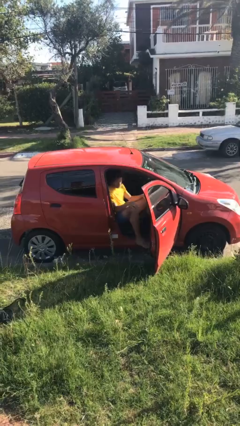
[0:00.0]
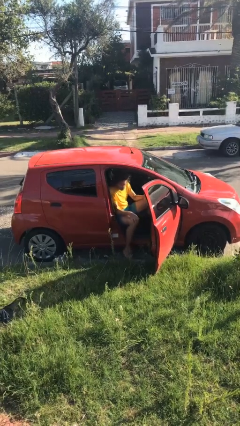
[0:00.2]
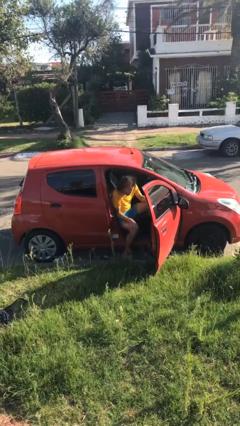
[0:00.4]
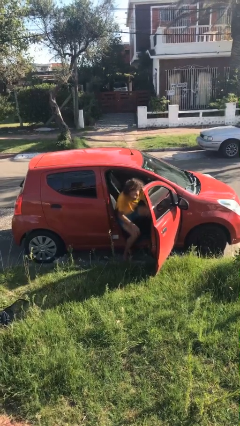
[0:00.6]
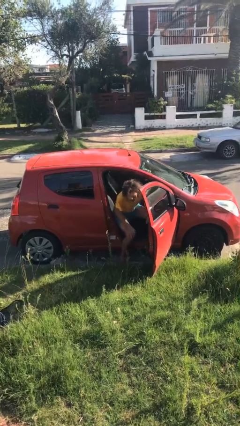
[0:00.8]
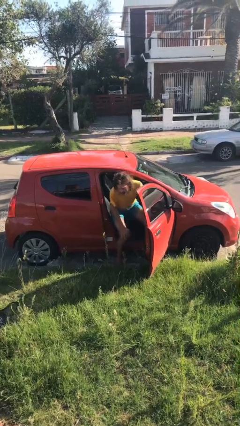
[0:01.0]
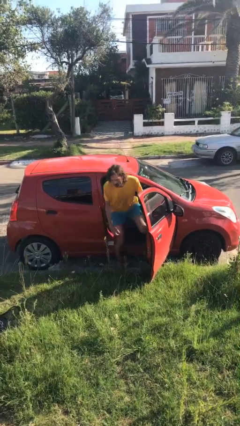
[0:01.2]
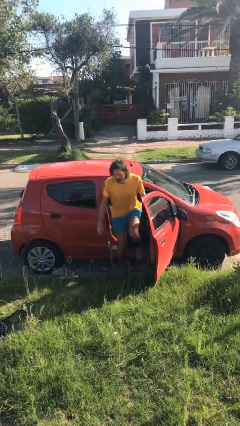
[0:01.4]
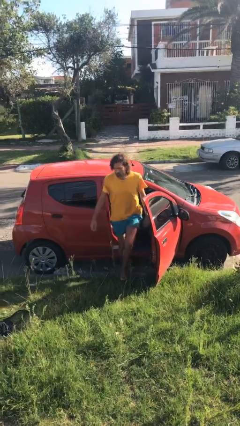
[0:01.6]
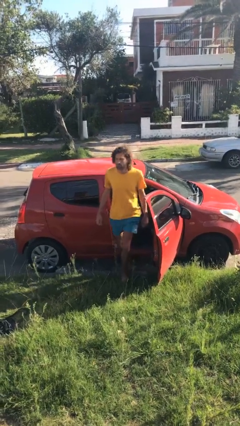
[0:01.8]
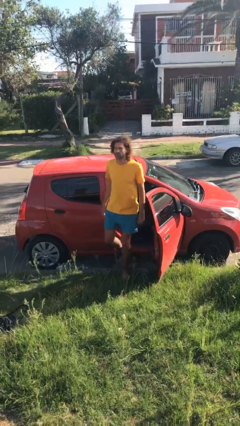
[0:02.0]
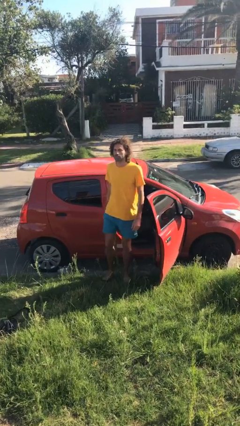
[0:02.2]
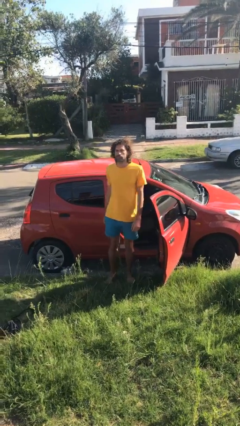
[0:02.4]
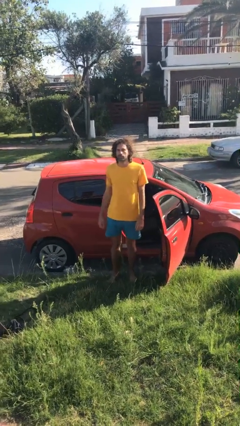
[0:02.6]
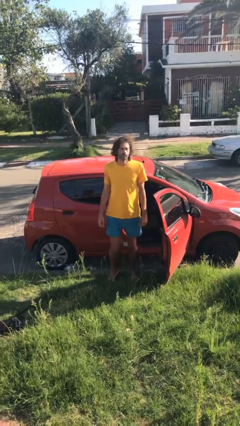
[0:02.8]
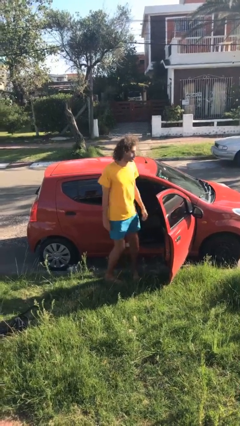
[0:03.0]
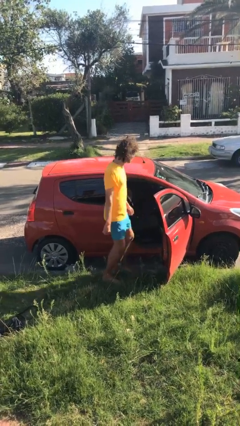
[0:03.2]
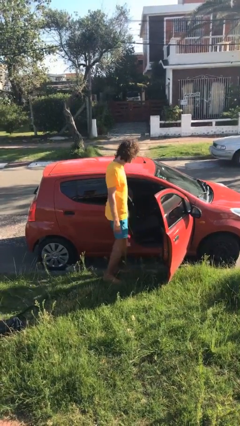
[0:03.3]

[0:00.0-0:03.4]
person exits car

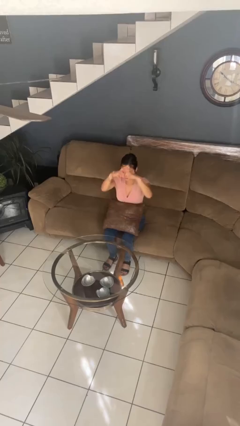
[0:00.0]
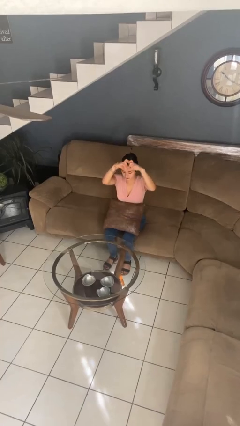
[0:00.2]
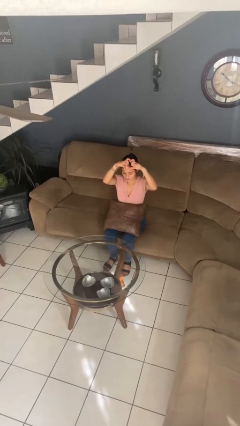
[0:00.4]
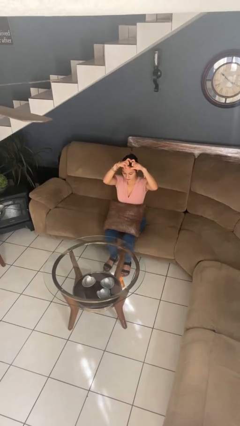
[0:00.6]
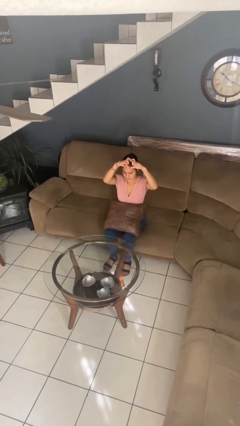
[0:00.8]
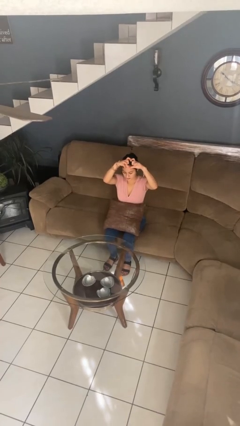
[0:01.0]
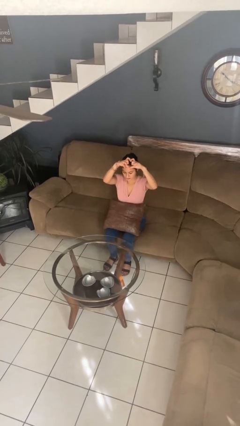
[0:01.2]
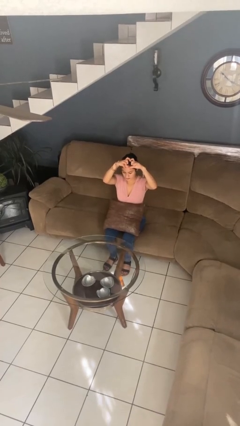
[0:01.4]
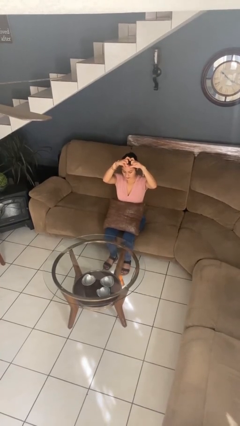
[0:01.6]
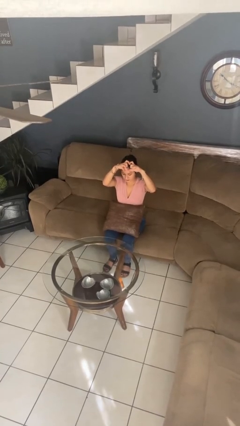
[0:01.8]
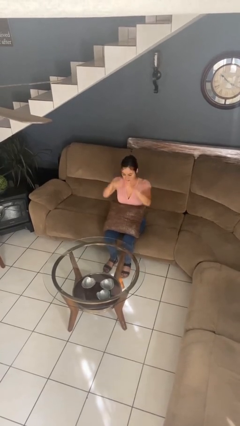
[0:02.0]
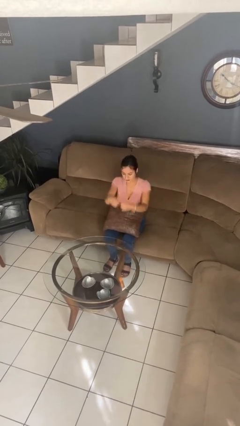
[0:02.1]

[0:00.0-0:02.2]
person gestures heart

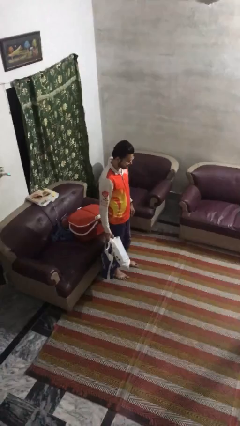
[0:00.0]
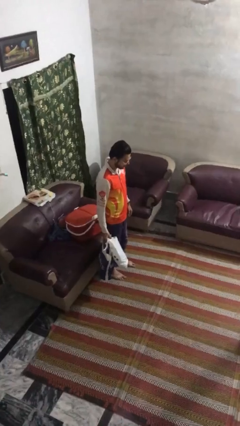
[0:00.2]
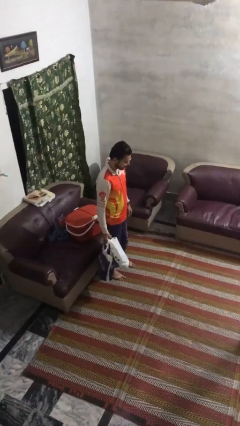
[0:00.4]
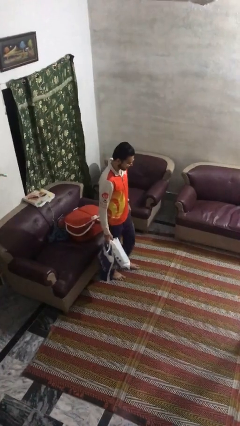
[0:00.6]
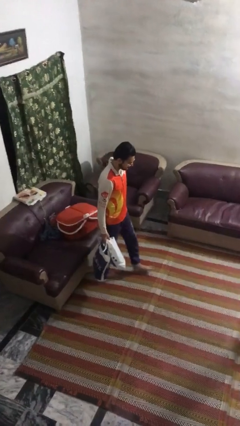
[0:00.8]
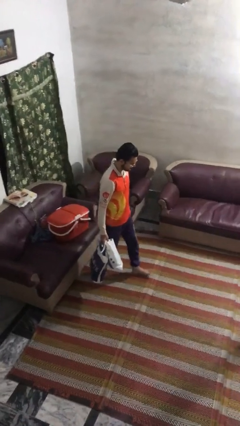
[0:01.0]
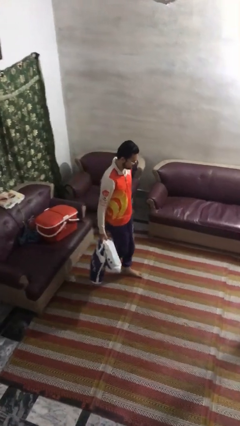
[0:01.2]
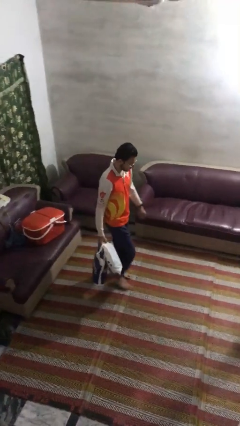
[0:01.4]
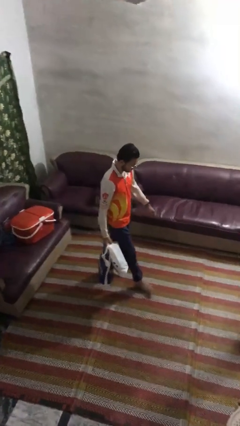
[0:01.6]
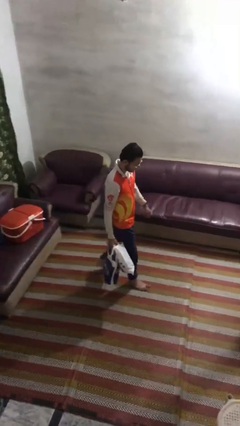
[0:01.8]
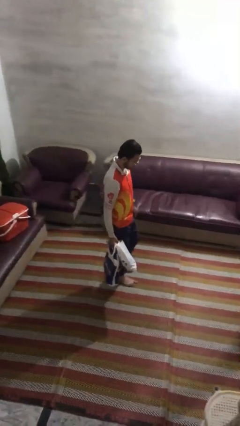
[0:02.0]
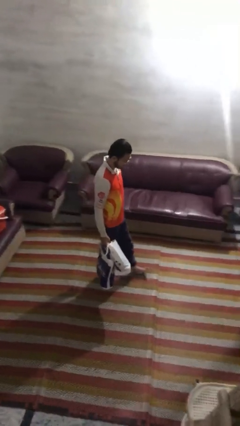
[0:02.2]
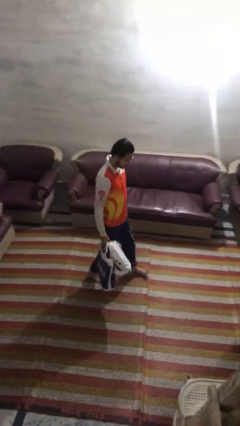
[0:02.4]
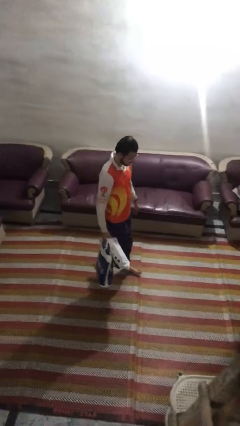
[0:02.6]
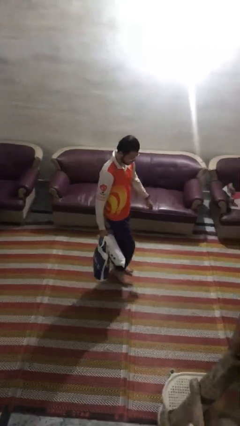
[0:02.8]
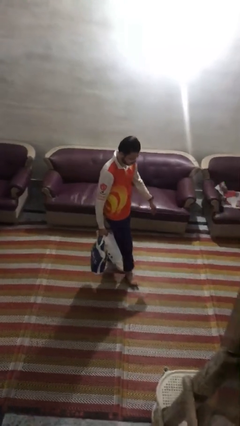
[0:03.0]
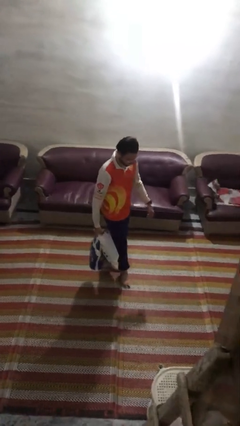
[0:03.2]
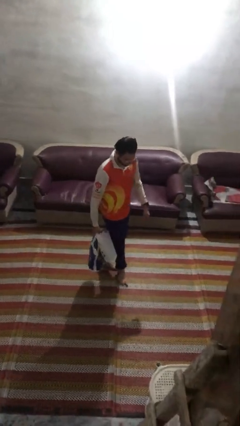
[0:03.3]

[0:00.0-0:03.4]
person carries groceries

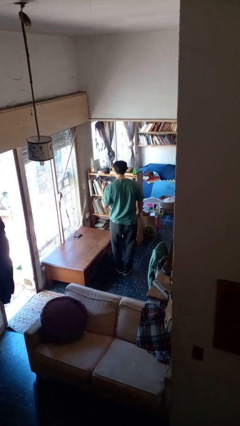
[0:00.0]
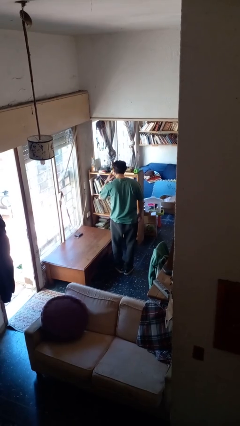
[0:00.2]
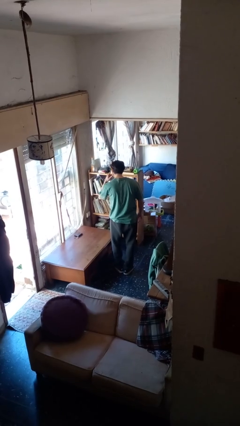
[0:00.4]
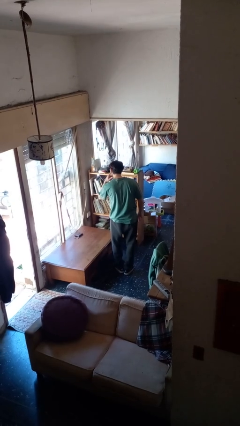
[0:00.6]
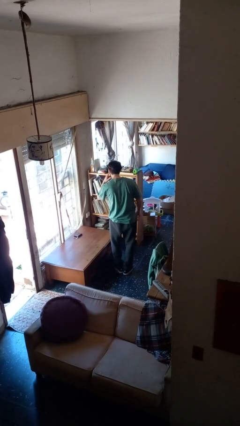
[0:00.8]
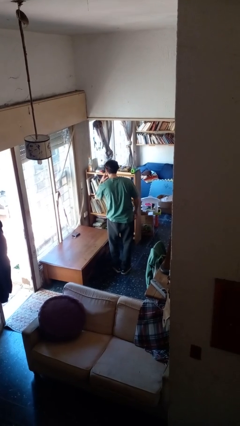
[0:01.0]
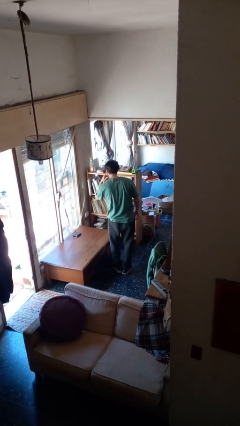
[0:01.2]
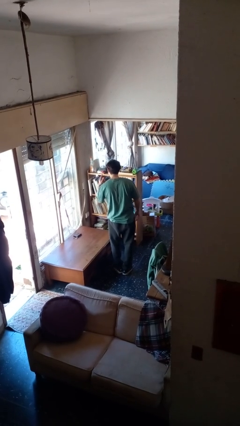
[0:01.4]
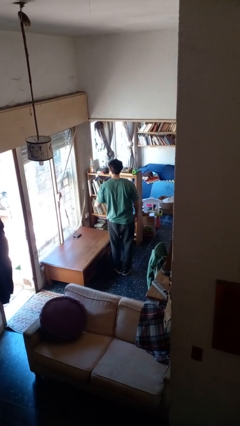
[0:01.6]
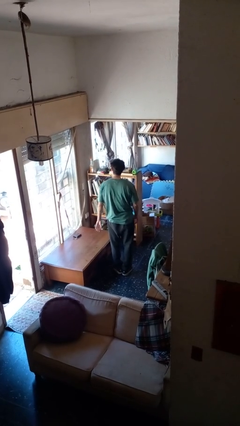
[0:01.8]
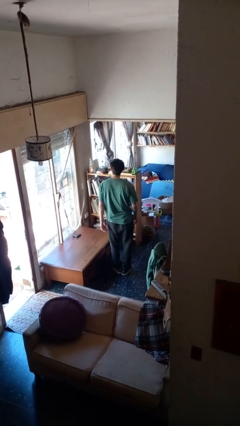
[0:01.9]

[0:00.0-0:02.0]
person gestures listen closely

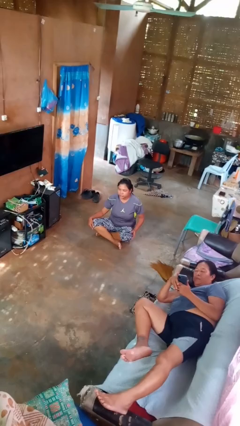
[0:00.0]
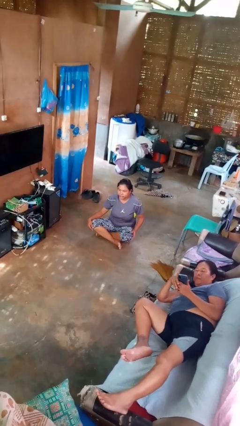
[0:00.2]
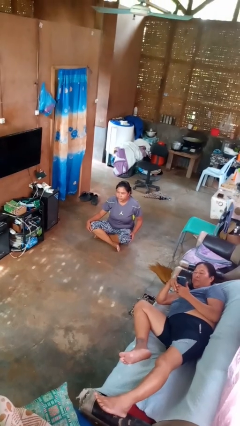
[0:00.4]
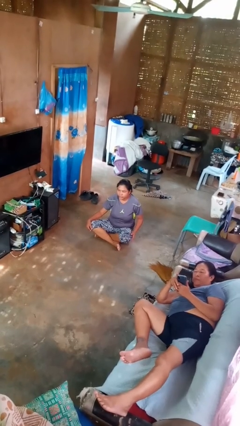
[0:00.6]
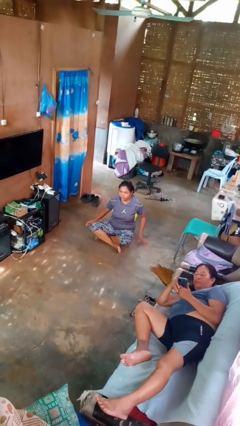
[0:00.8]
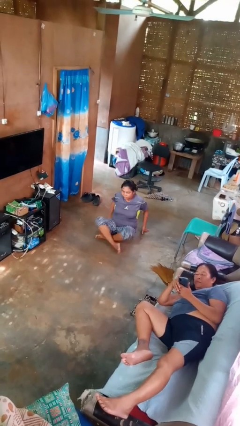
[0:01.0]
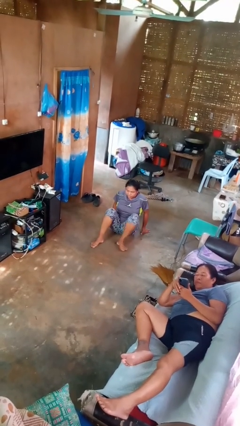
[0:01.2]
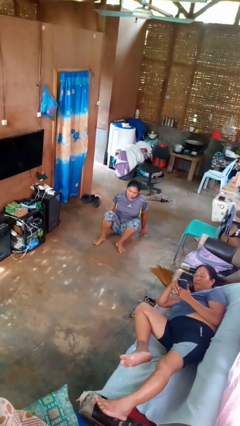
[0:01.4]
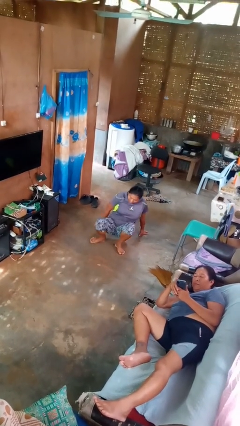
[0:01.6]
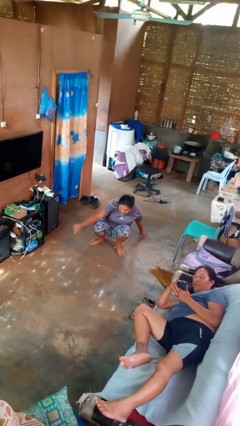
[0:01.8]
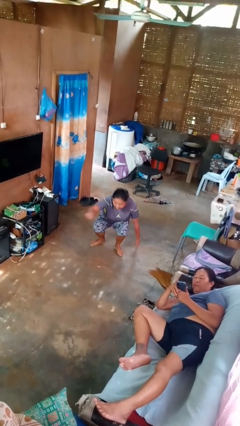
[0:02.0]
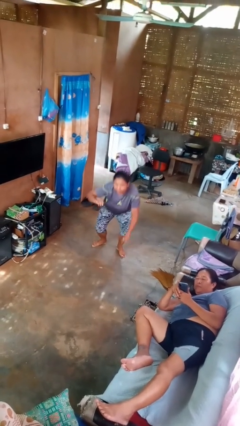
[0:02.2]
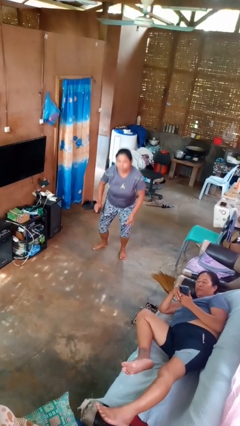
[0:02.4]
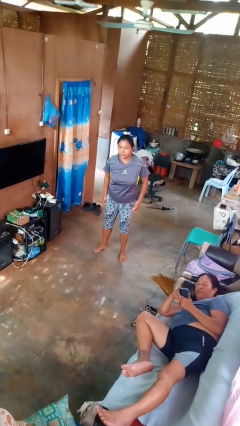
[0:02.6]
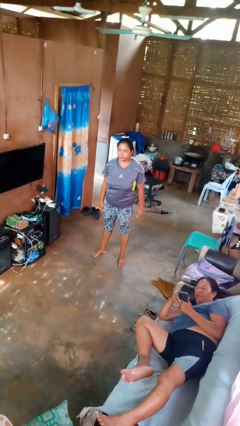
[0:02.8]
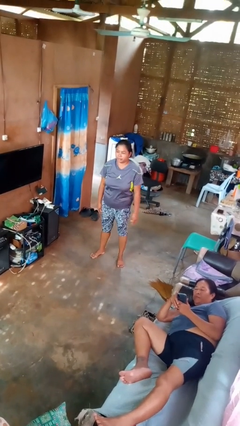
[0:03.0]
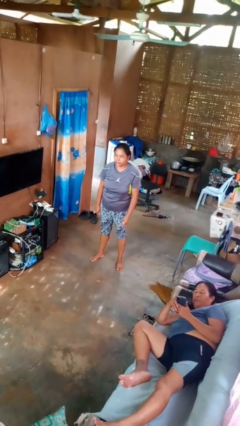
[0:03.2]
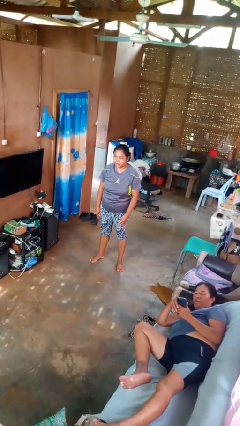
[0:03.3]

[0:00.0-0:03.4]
person stands up from floor

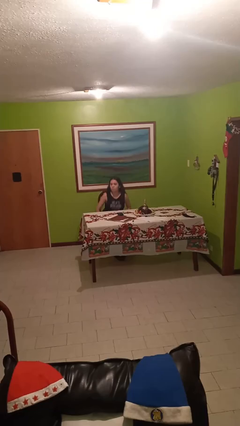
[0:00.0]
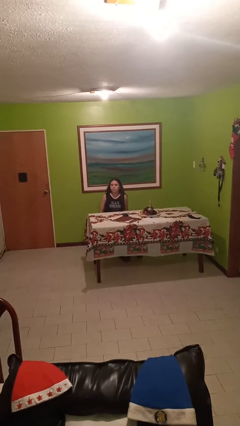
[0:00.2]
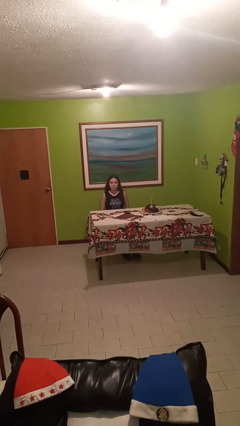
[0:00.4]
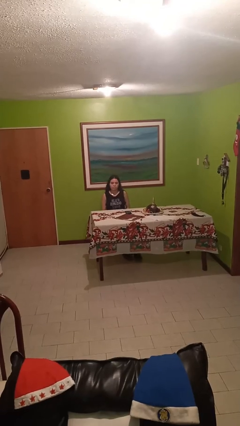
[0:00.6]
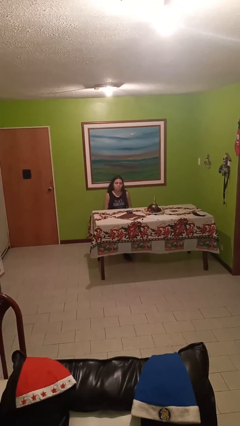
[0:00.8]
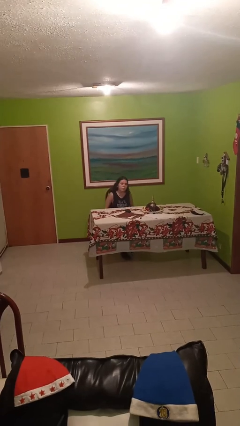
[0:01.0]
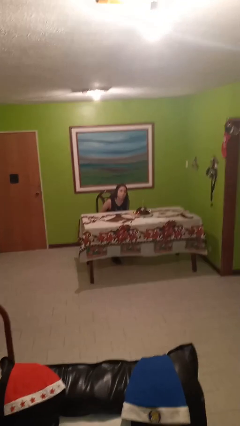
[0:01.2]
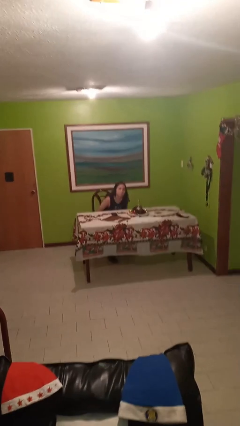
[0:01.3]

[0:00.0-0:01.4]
person sits down

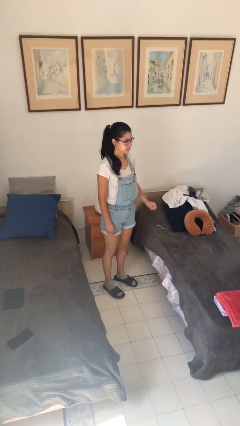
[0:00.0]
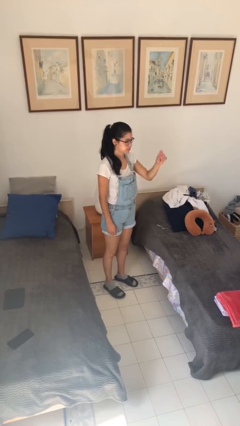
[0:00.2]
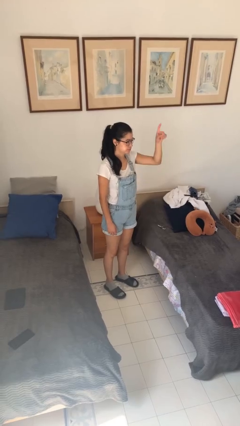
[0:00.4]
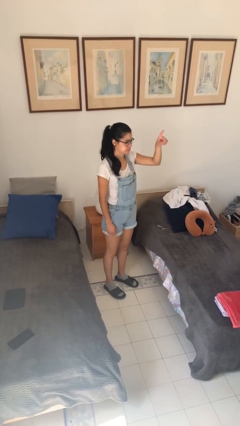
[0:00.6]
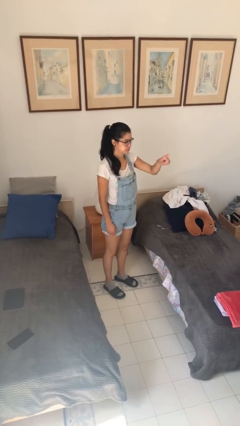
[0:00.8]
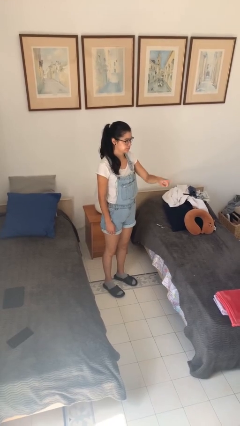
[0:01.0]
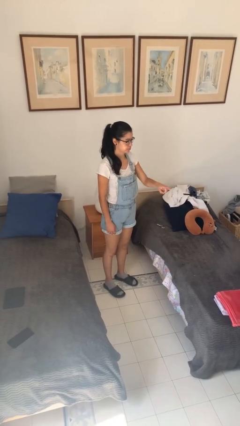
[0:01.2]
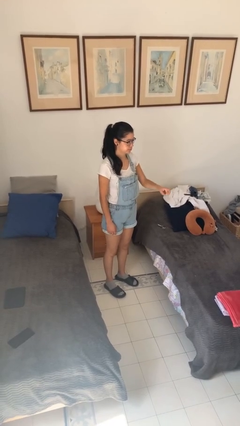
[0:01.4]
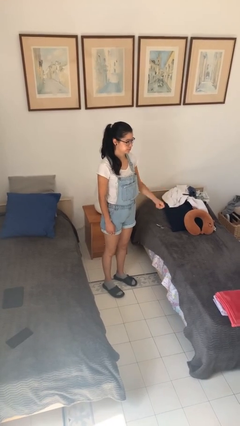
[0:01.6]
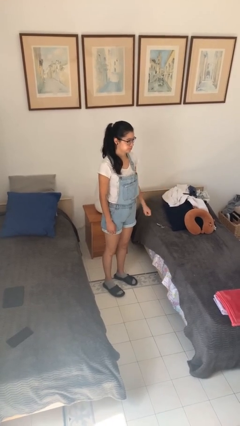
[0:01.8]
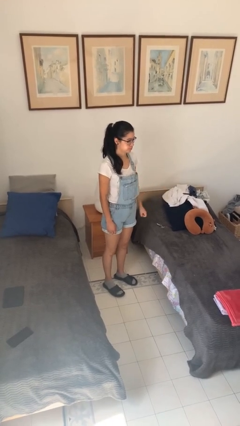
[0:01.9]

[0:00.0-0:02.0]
person gestures number one
